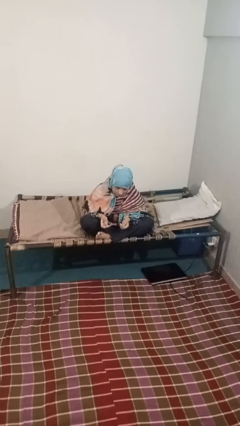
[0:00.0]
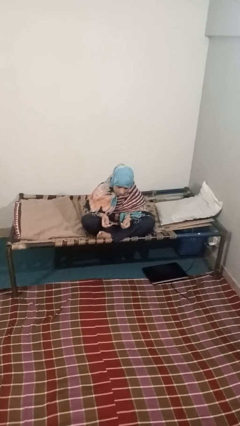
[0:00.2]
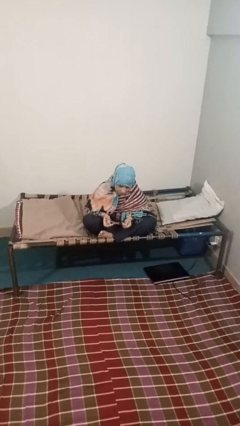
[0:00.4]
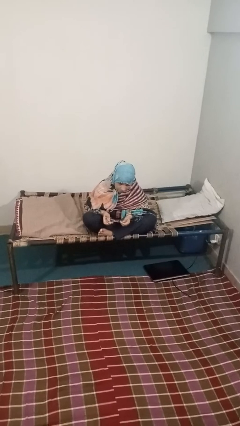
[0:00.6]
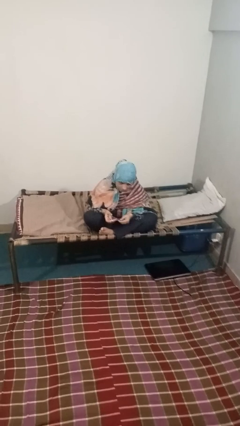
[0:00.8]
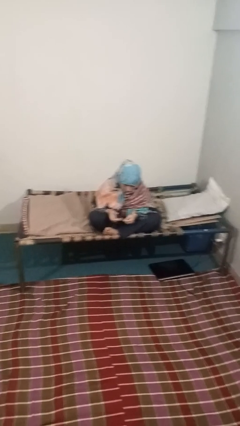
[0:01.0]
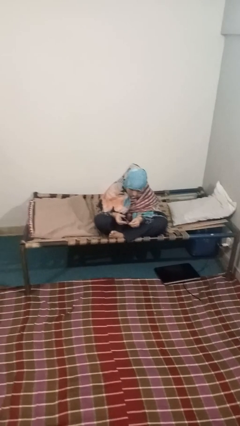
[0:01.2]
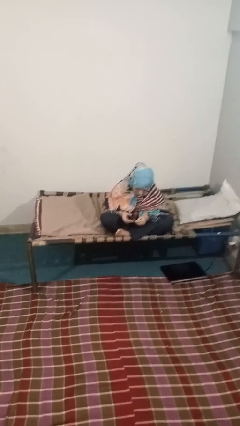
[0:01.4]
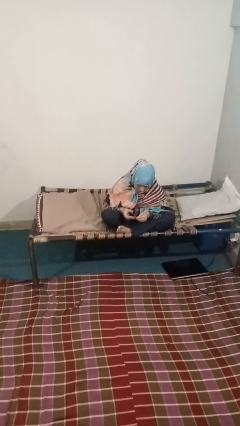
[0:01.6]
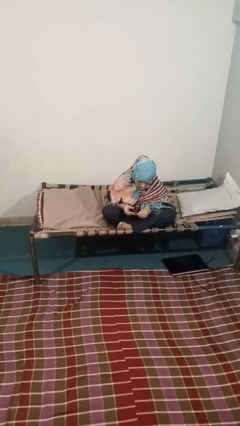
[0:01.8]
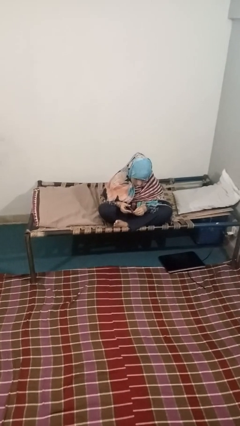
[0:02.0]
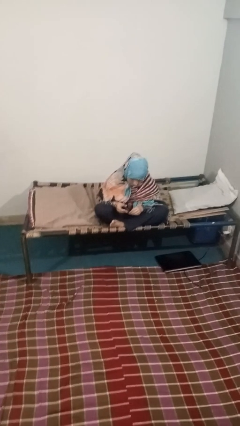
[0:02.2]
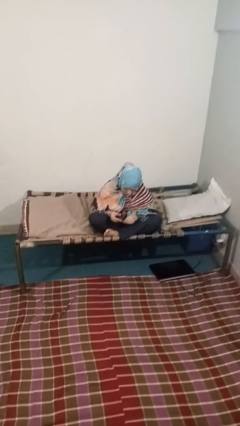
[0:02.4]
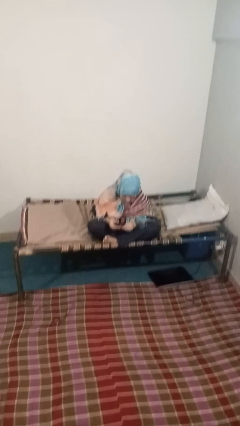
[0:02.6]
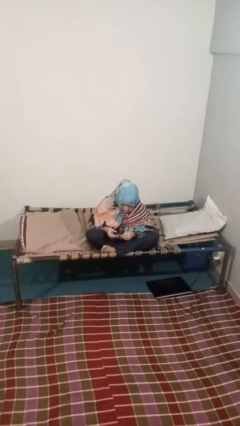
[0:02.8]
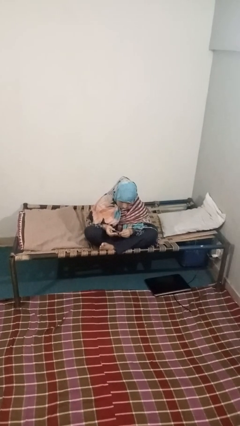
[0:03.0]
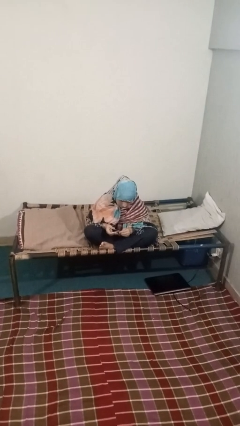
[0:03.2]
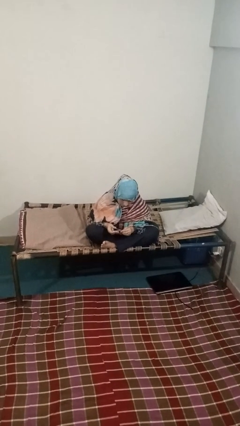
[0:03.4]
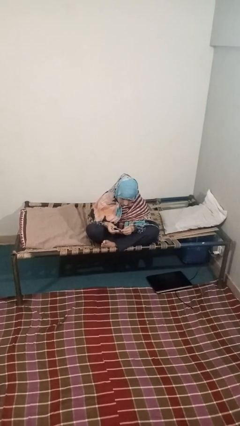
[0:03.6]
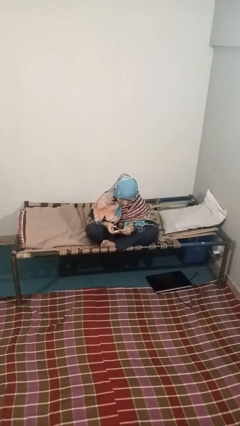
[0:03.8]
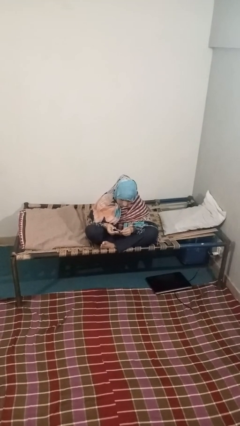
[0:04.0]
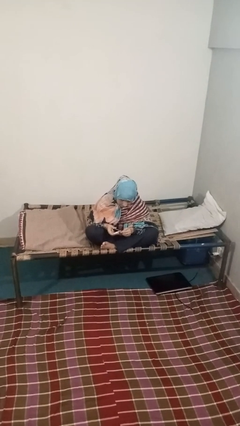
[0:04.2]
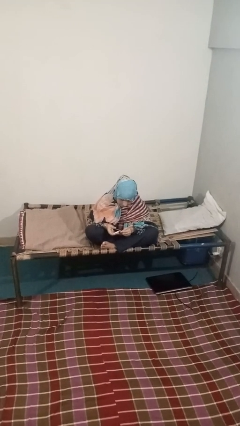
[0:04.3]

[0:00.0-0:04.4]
person clips fingernails

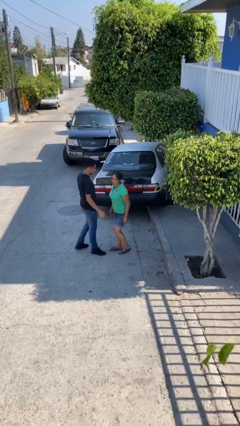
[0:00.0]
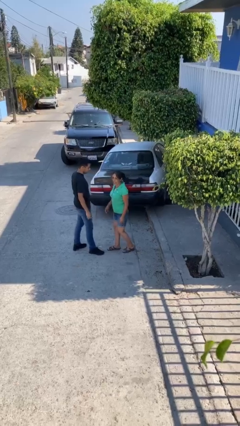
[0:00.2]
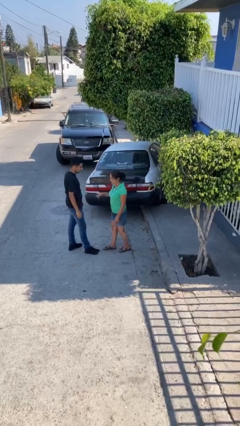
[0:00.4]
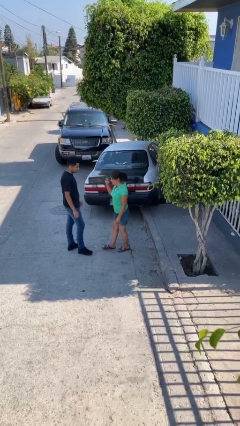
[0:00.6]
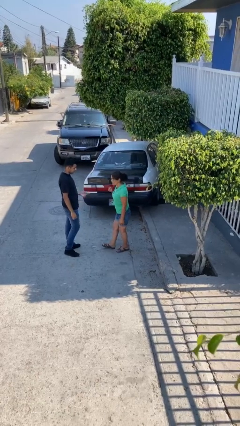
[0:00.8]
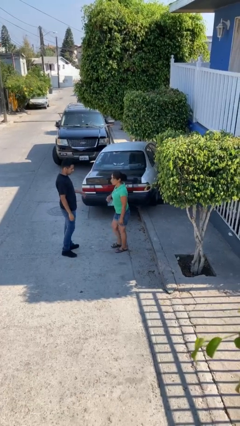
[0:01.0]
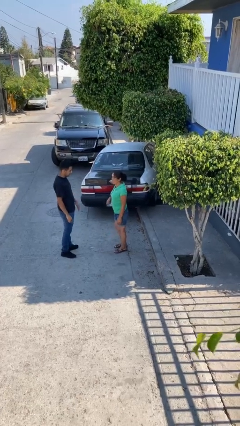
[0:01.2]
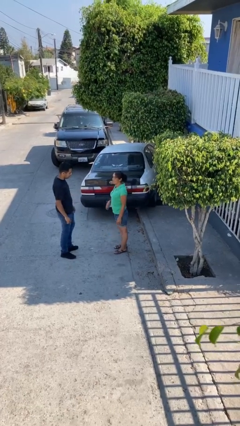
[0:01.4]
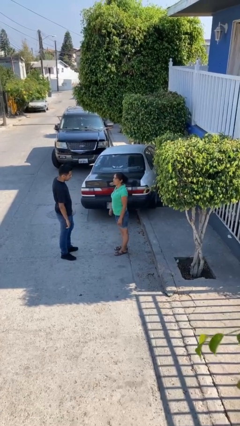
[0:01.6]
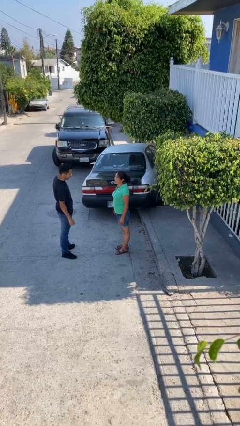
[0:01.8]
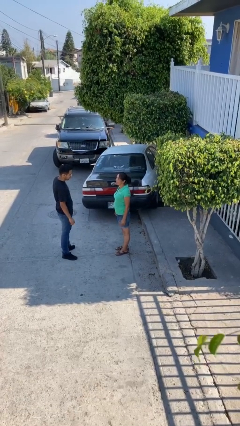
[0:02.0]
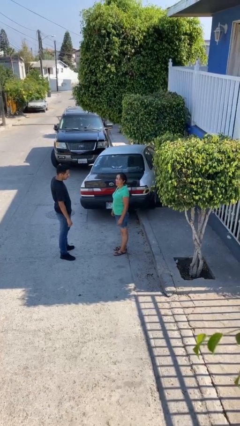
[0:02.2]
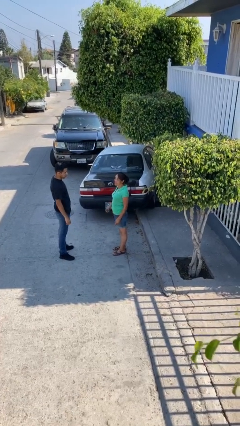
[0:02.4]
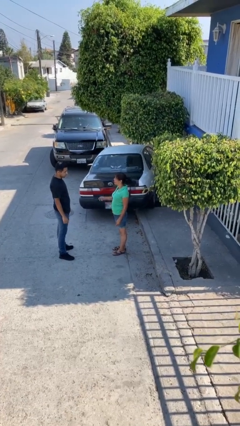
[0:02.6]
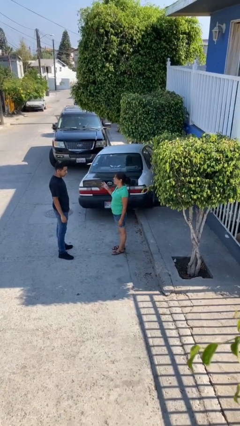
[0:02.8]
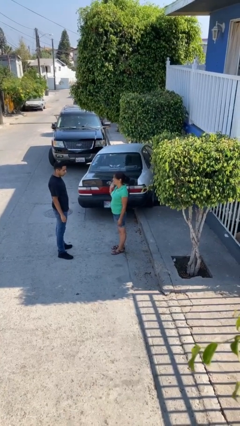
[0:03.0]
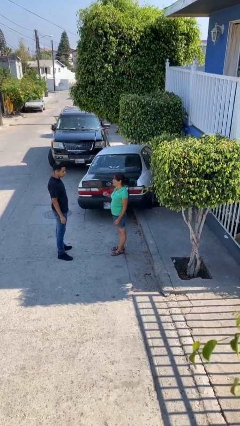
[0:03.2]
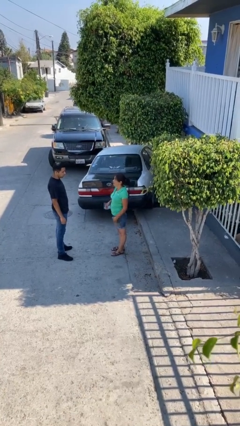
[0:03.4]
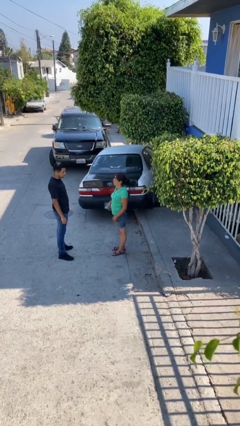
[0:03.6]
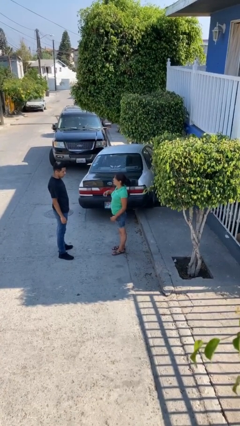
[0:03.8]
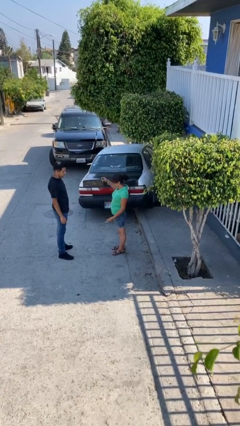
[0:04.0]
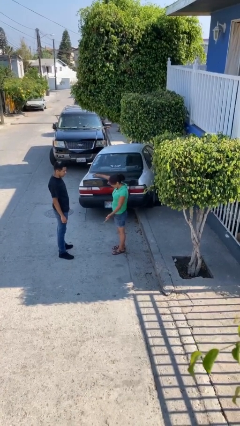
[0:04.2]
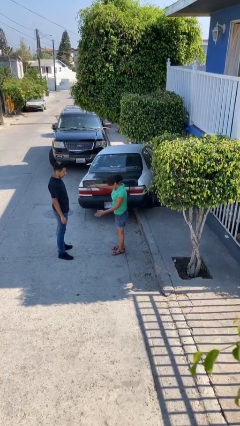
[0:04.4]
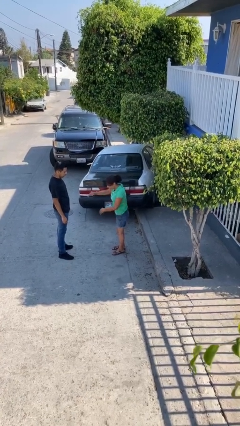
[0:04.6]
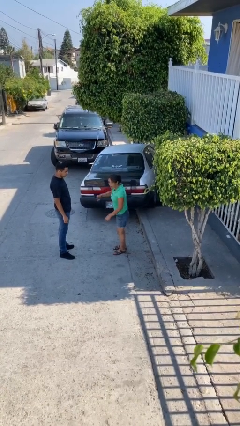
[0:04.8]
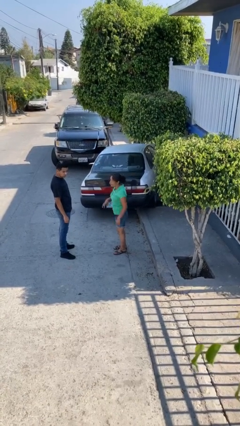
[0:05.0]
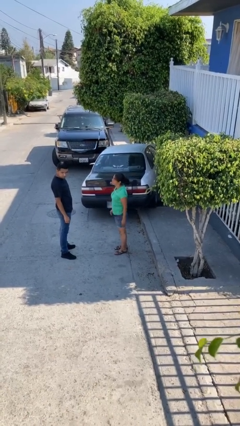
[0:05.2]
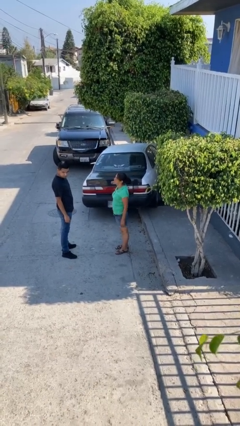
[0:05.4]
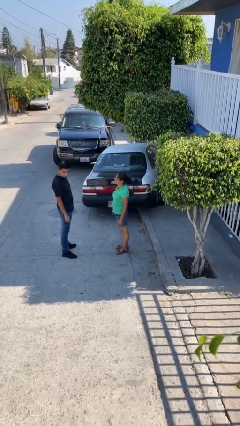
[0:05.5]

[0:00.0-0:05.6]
person talks to person

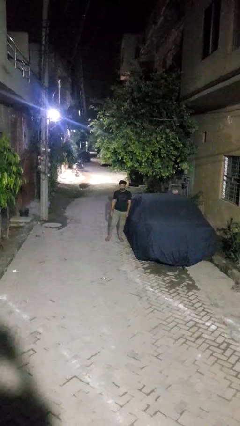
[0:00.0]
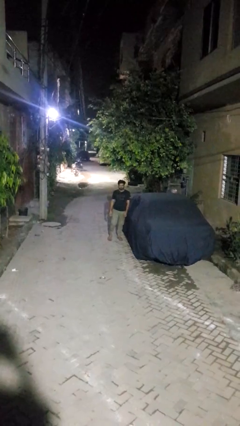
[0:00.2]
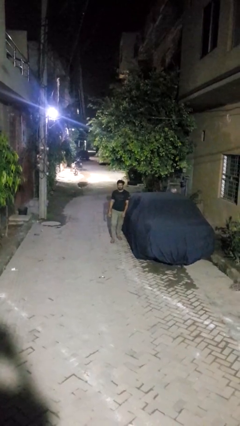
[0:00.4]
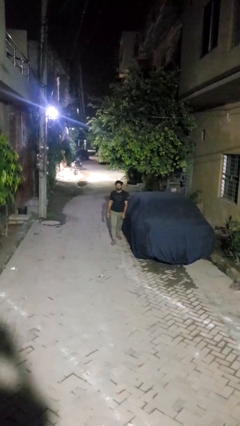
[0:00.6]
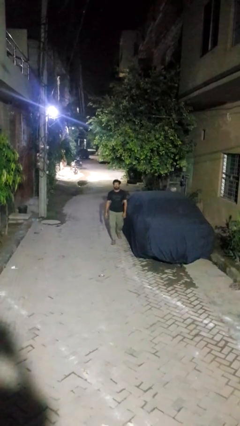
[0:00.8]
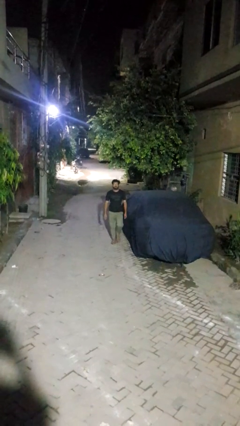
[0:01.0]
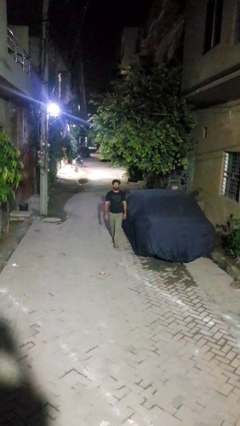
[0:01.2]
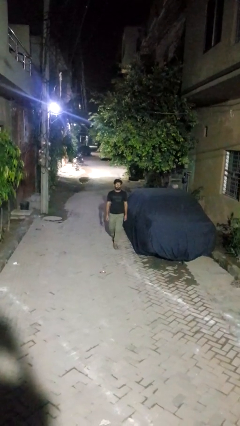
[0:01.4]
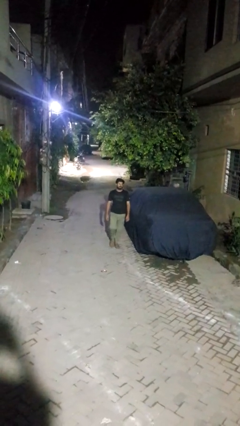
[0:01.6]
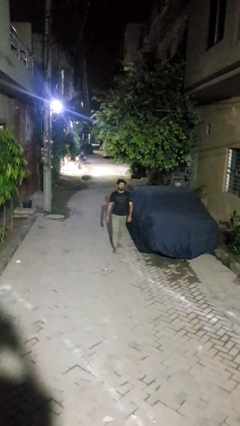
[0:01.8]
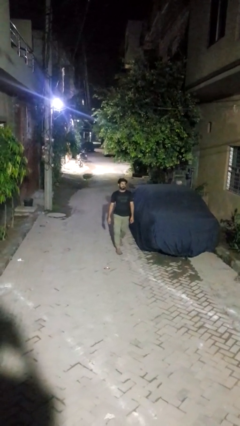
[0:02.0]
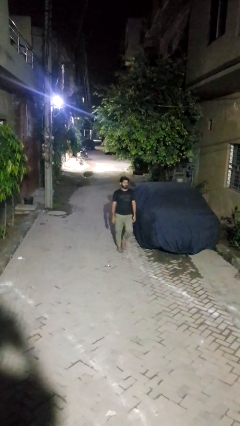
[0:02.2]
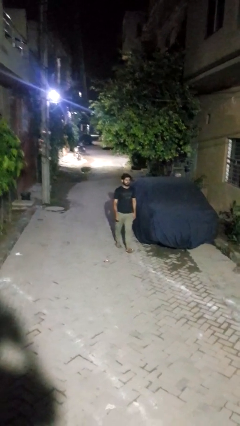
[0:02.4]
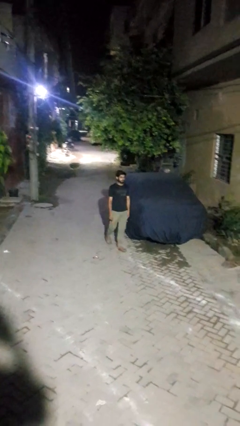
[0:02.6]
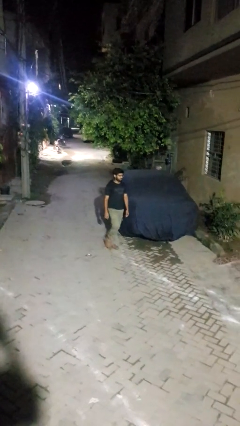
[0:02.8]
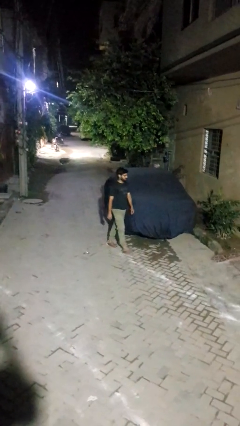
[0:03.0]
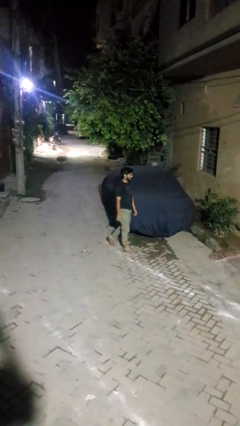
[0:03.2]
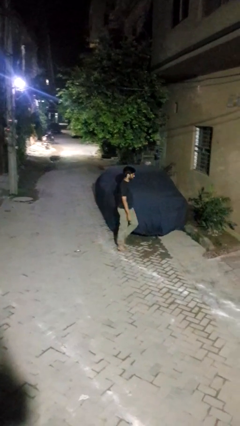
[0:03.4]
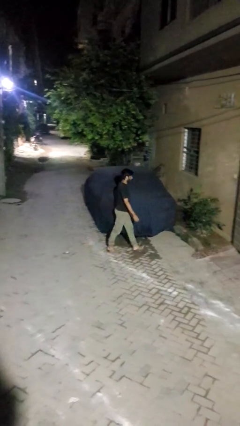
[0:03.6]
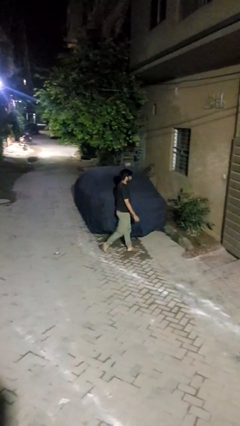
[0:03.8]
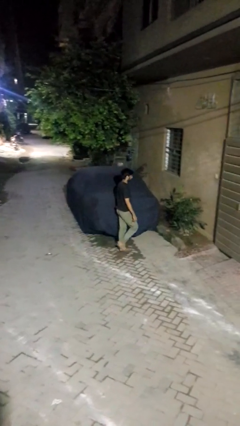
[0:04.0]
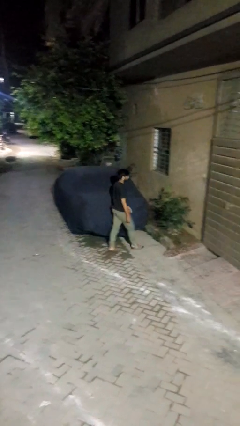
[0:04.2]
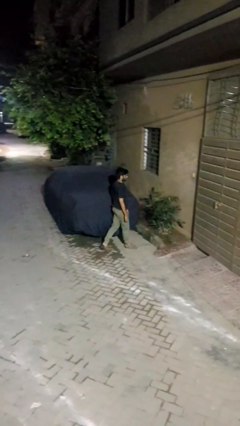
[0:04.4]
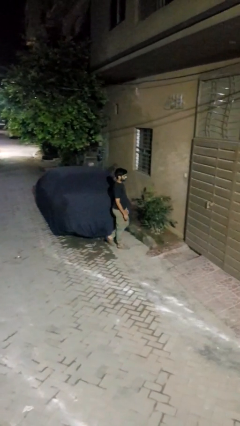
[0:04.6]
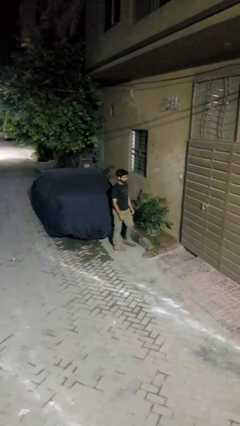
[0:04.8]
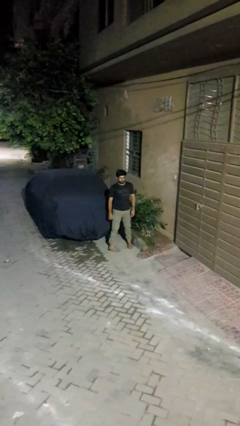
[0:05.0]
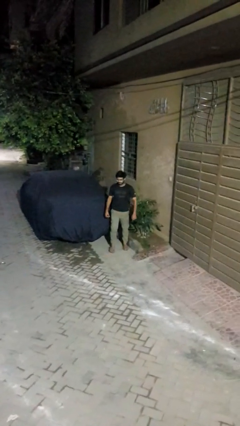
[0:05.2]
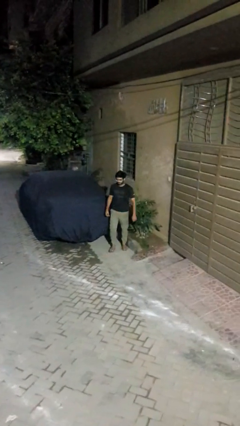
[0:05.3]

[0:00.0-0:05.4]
person walks around car

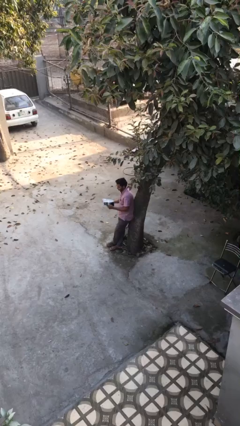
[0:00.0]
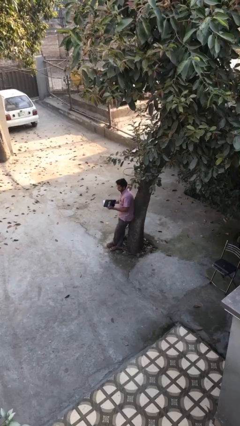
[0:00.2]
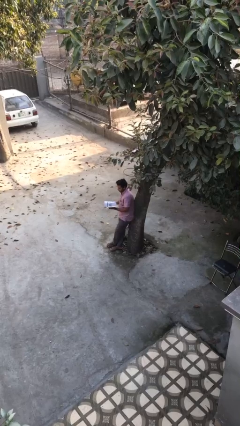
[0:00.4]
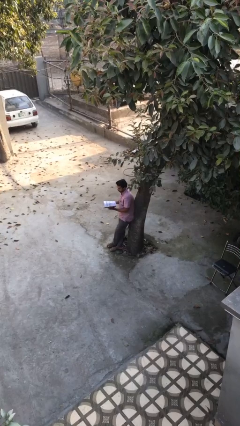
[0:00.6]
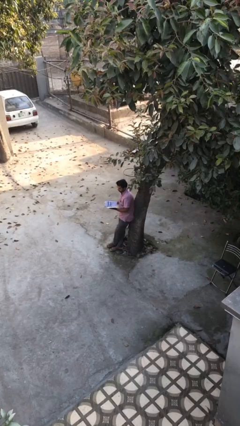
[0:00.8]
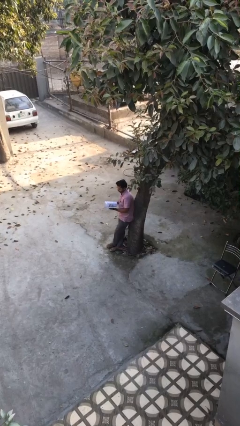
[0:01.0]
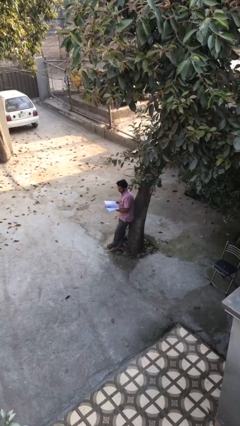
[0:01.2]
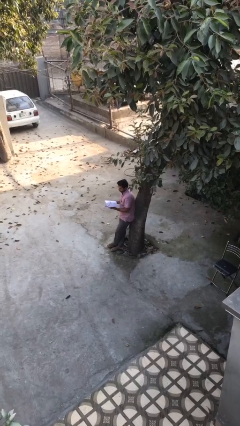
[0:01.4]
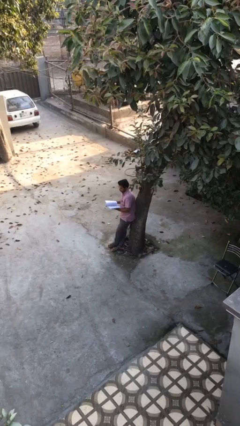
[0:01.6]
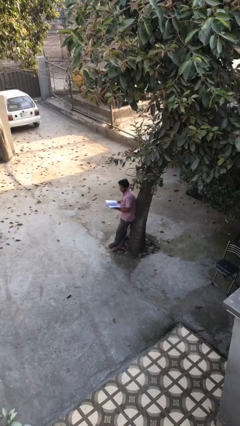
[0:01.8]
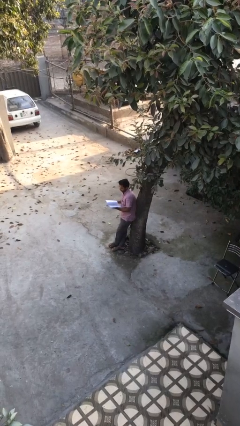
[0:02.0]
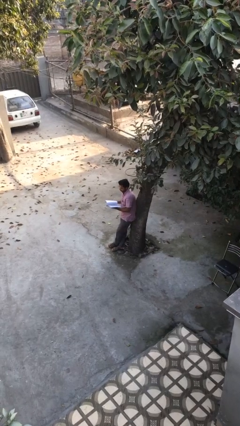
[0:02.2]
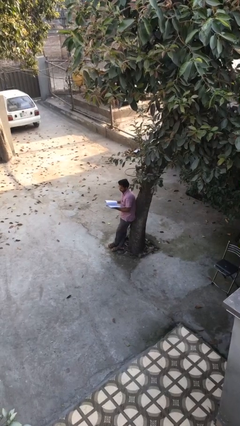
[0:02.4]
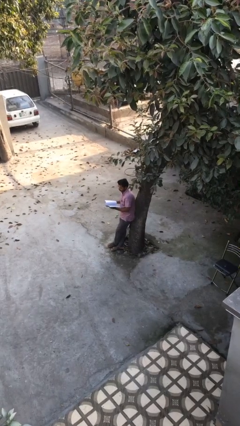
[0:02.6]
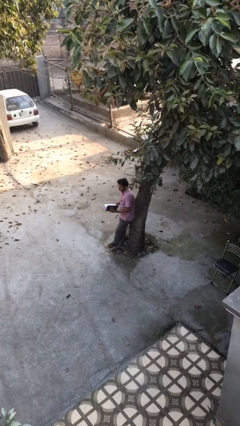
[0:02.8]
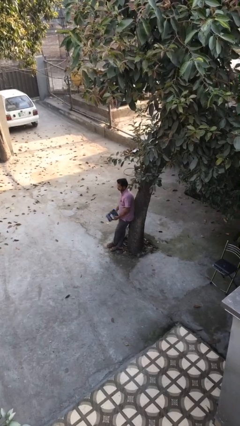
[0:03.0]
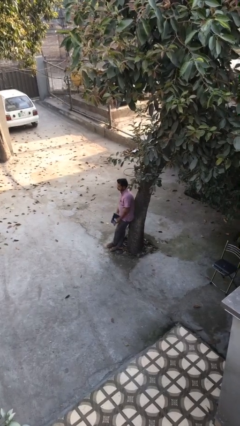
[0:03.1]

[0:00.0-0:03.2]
person reads document
